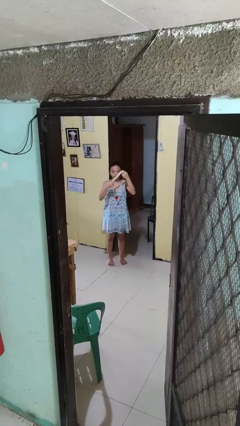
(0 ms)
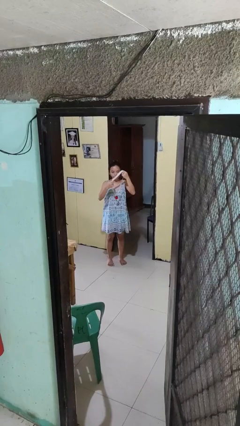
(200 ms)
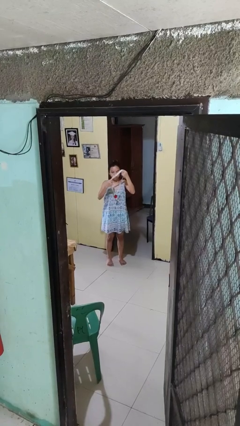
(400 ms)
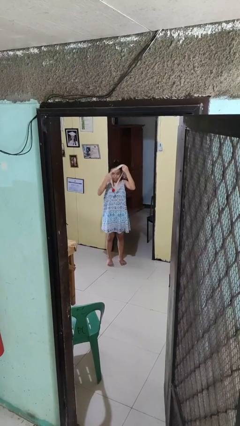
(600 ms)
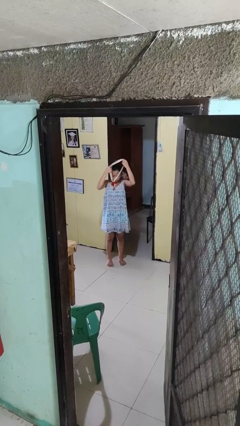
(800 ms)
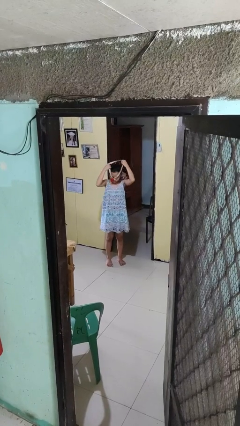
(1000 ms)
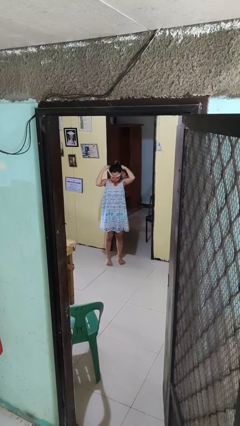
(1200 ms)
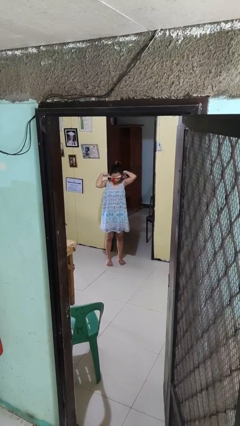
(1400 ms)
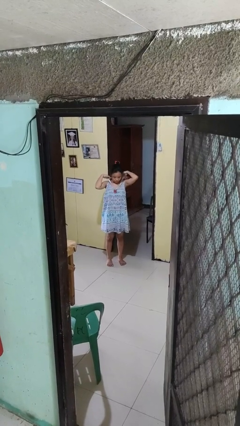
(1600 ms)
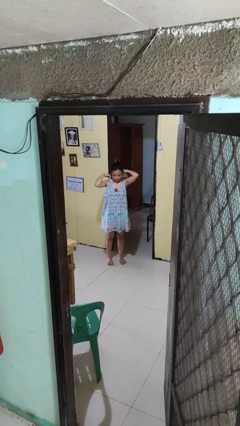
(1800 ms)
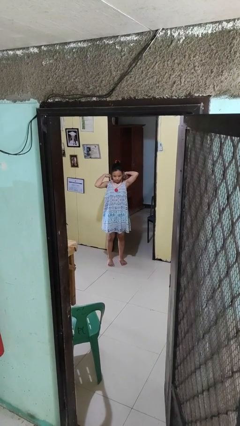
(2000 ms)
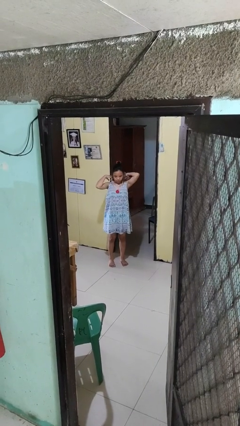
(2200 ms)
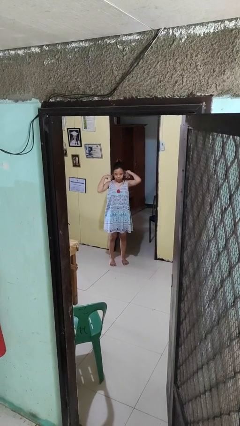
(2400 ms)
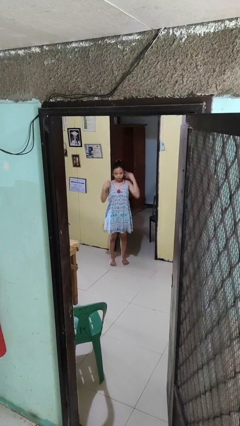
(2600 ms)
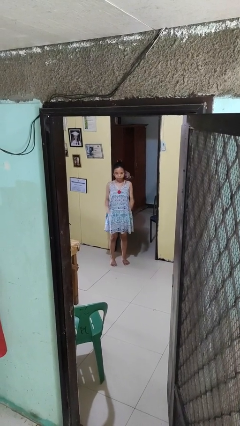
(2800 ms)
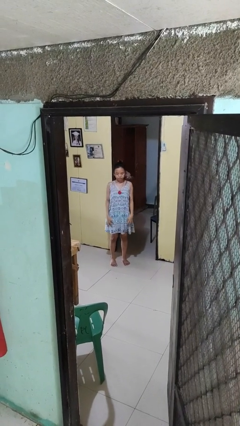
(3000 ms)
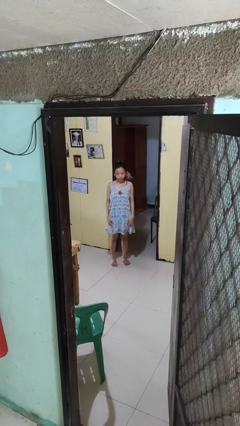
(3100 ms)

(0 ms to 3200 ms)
person puts on necklace

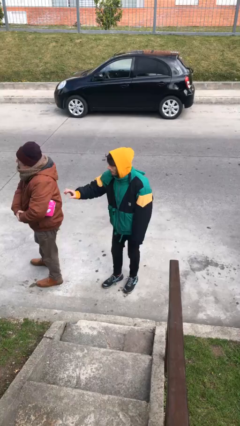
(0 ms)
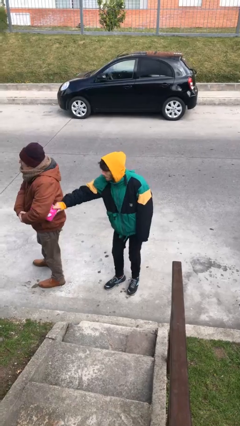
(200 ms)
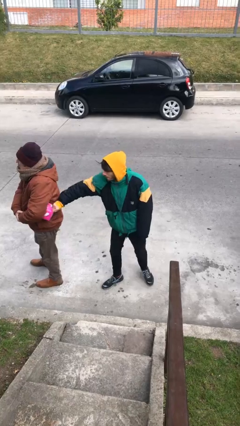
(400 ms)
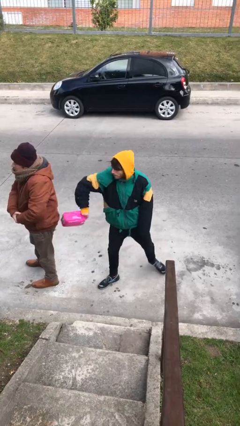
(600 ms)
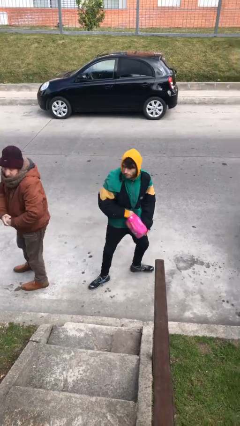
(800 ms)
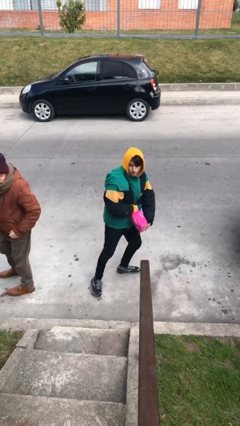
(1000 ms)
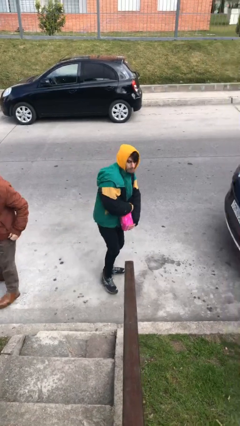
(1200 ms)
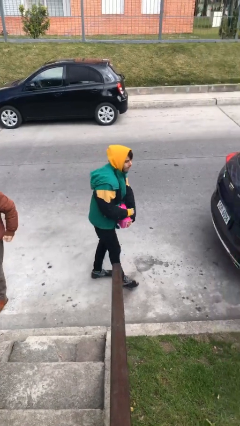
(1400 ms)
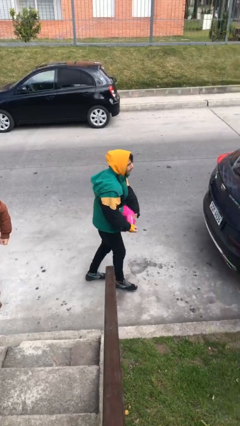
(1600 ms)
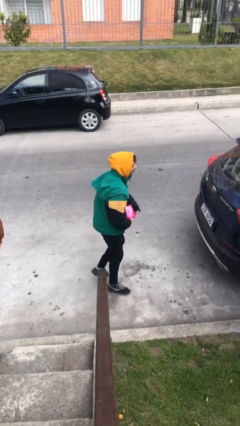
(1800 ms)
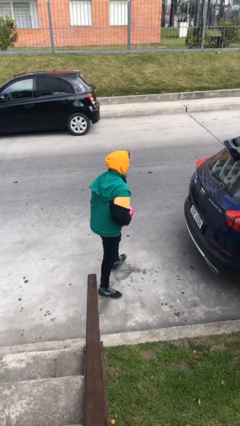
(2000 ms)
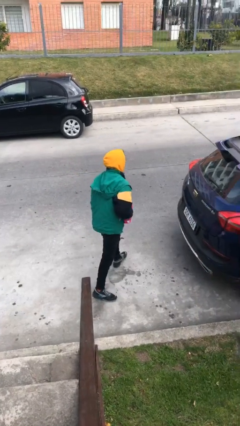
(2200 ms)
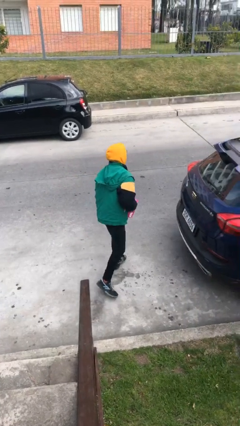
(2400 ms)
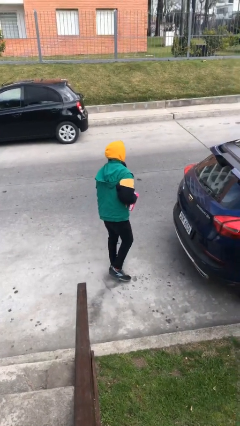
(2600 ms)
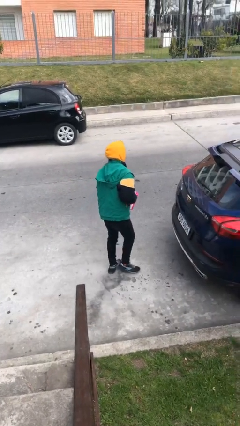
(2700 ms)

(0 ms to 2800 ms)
person steals object from person

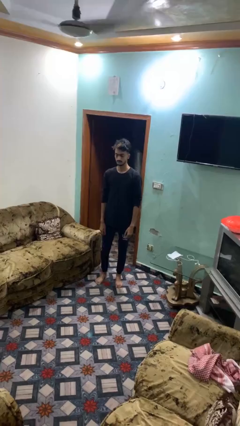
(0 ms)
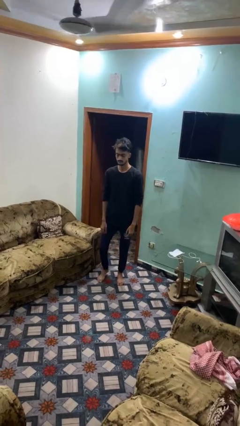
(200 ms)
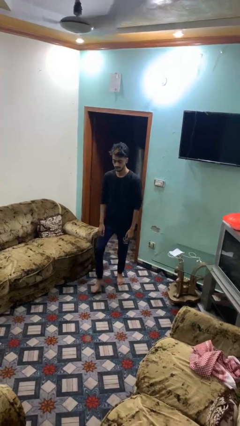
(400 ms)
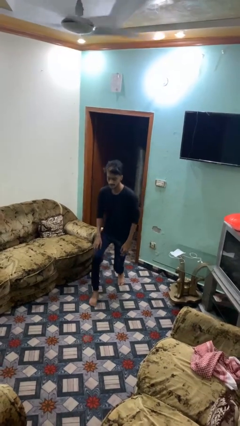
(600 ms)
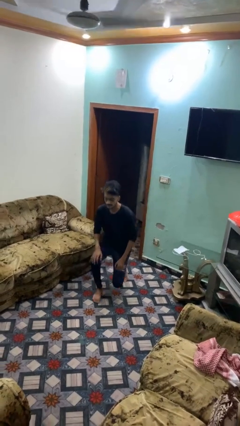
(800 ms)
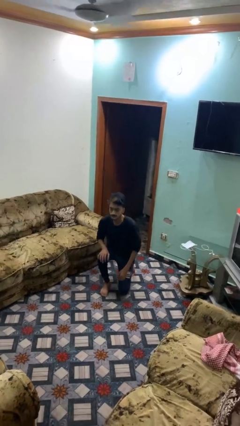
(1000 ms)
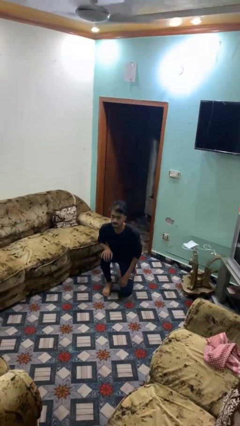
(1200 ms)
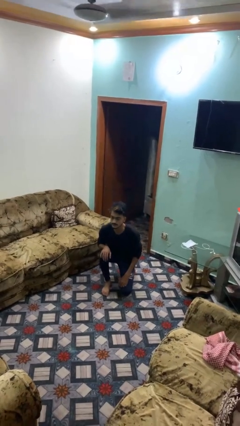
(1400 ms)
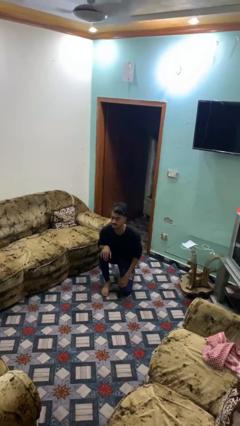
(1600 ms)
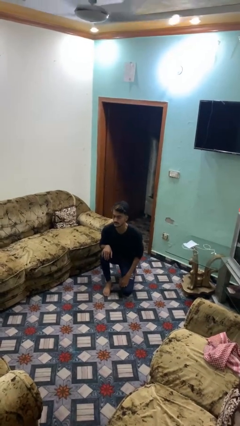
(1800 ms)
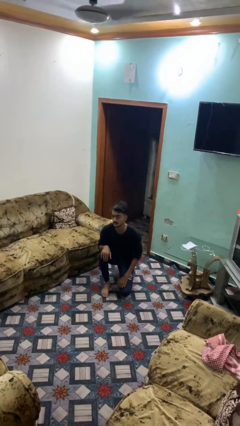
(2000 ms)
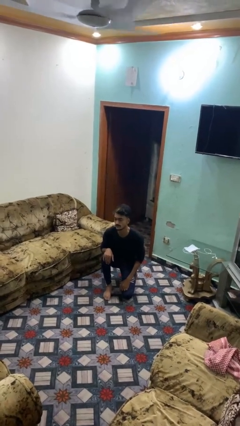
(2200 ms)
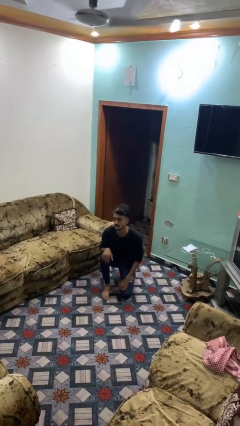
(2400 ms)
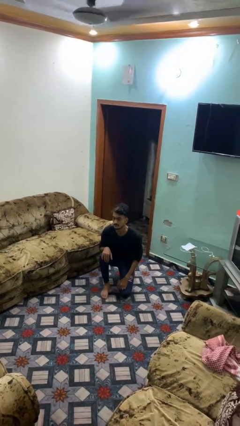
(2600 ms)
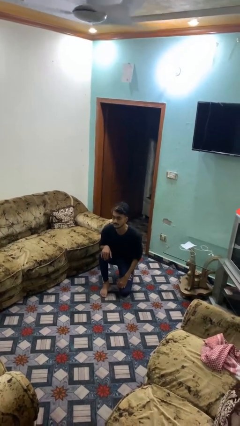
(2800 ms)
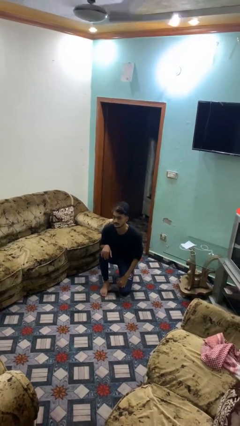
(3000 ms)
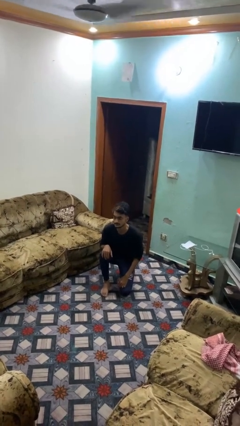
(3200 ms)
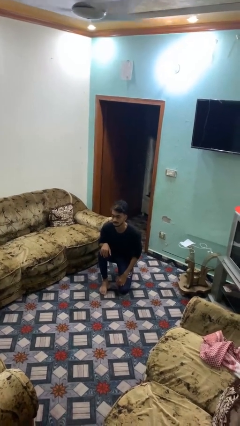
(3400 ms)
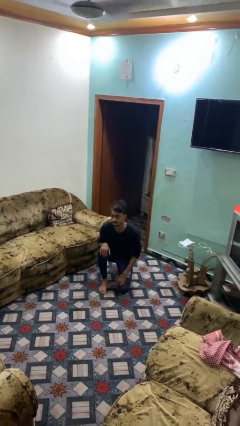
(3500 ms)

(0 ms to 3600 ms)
person kneels

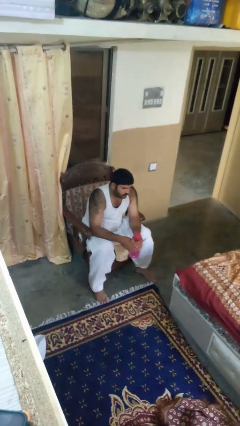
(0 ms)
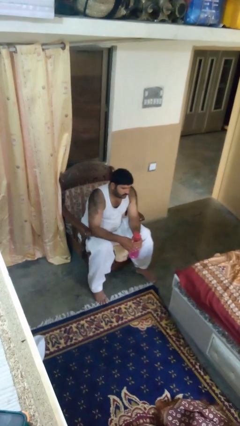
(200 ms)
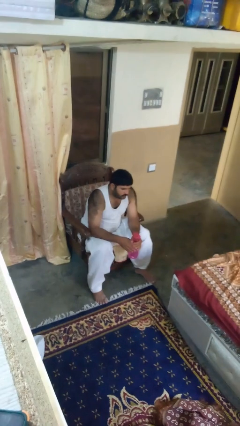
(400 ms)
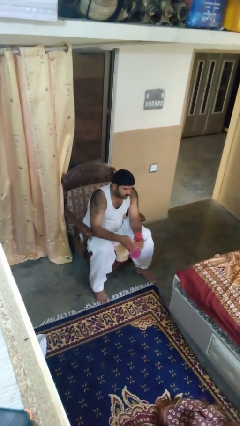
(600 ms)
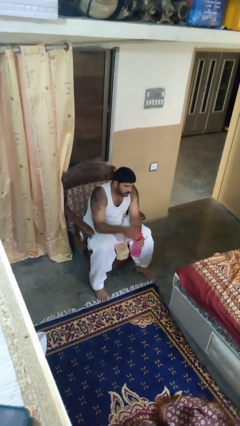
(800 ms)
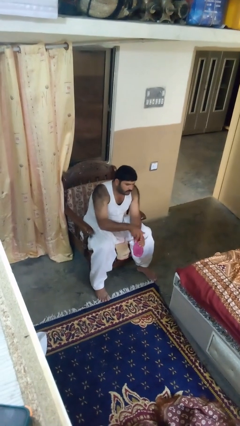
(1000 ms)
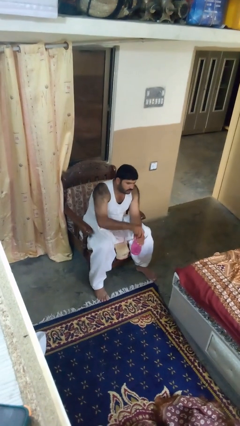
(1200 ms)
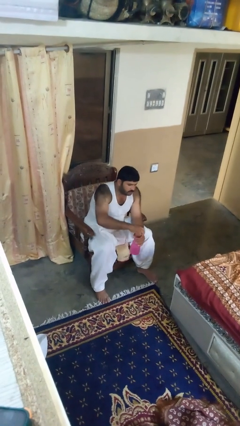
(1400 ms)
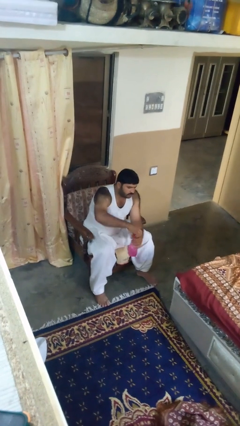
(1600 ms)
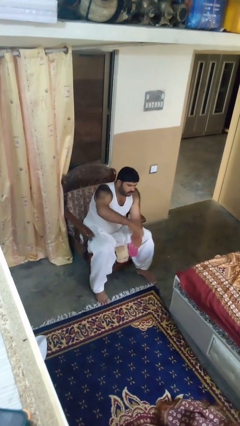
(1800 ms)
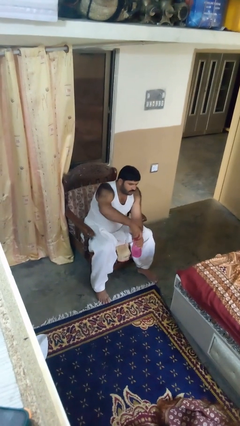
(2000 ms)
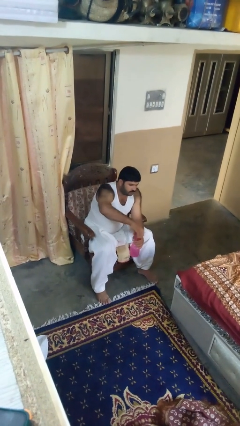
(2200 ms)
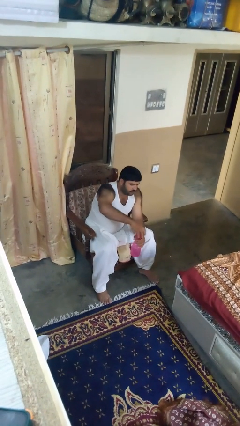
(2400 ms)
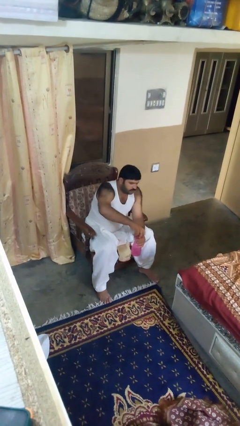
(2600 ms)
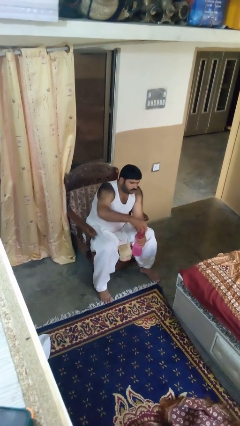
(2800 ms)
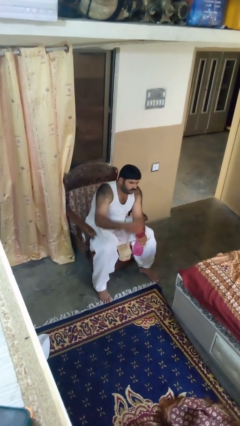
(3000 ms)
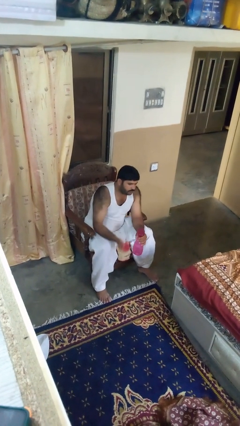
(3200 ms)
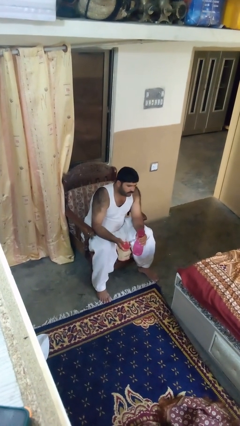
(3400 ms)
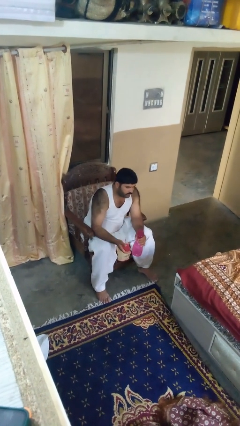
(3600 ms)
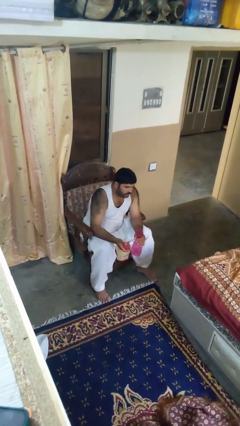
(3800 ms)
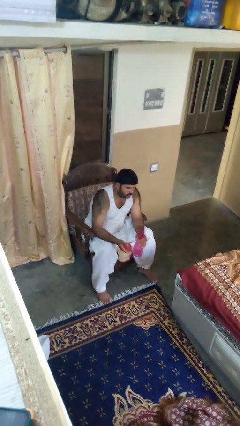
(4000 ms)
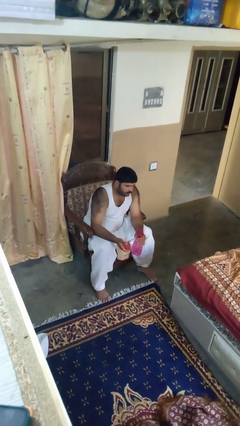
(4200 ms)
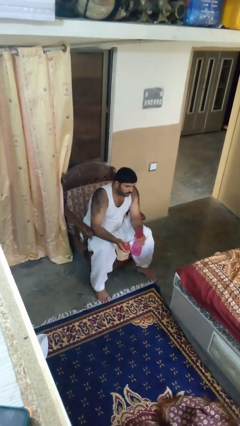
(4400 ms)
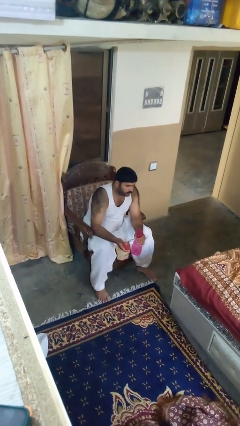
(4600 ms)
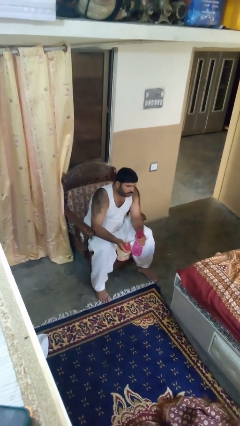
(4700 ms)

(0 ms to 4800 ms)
person unscrews lid from bottle

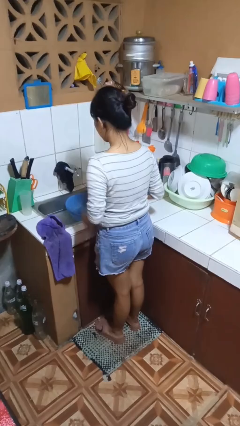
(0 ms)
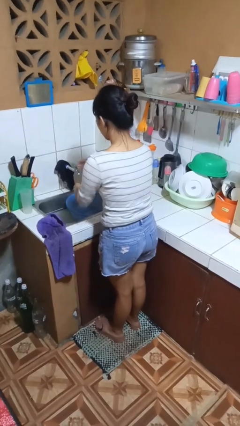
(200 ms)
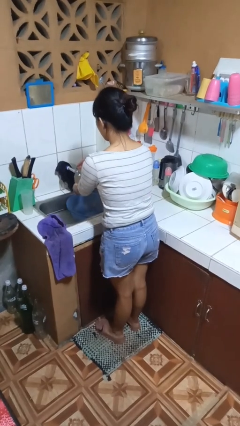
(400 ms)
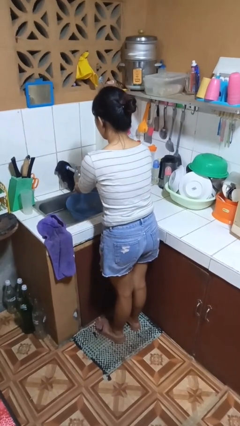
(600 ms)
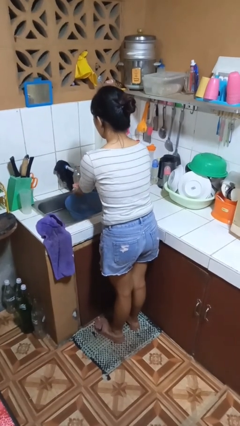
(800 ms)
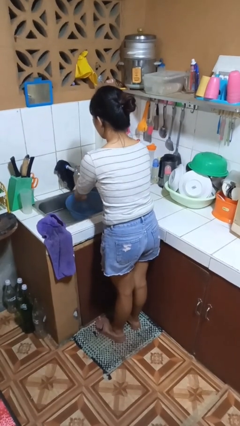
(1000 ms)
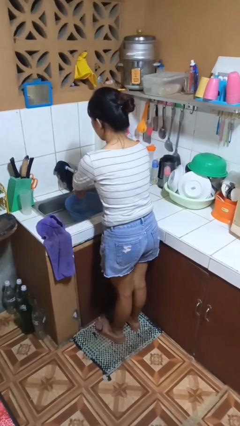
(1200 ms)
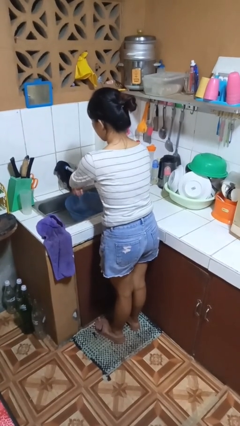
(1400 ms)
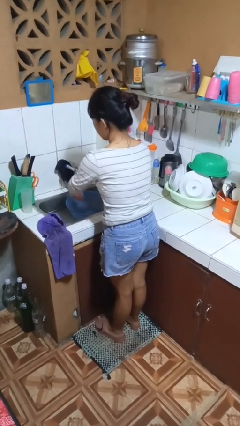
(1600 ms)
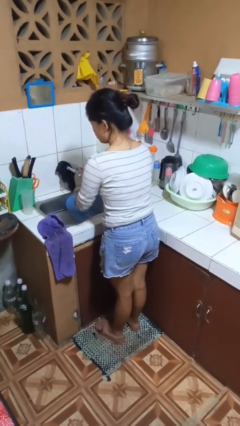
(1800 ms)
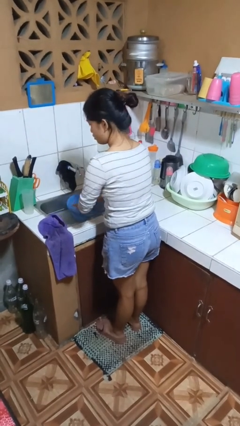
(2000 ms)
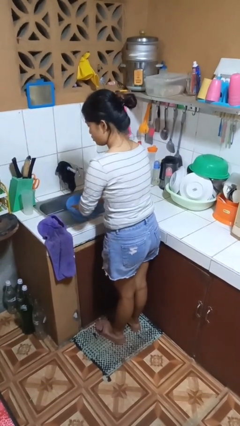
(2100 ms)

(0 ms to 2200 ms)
person washes hands

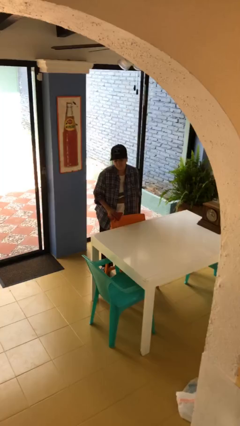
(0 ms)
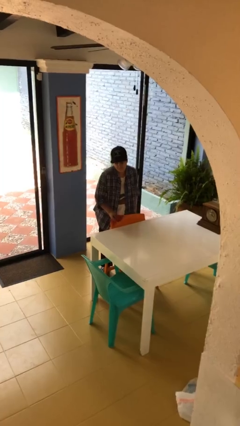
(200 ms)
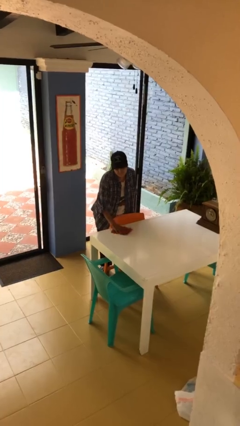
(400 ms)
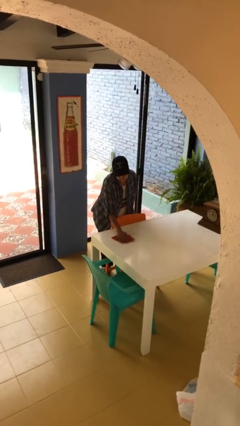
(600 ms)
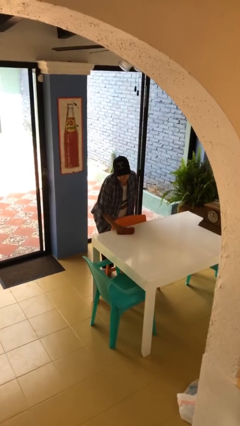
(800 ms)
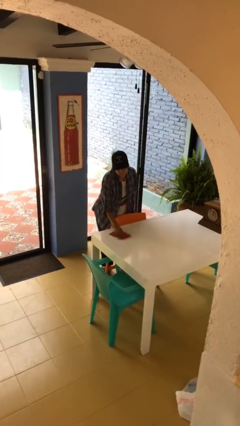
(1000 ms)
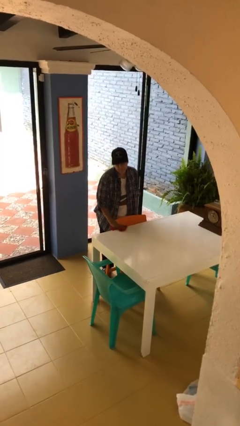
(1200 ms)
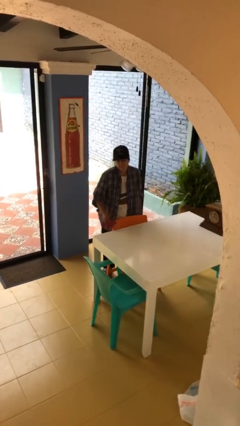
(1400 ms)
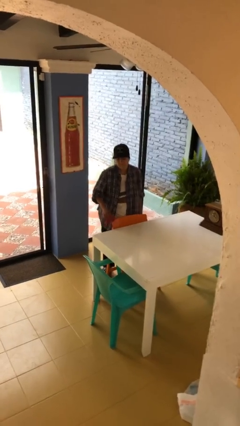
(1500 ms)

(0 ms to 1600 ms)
person cleans table with rag
